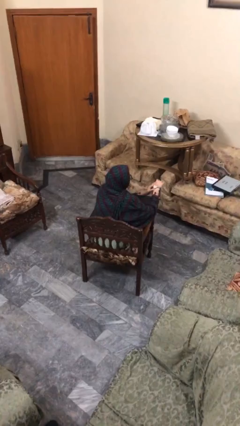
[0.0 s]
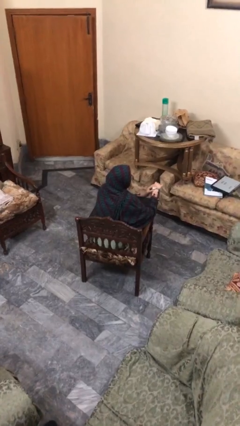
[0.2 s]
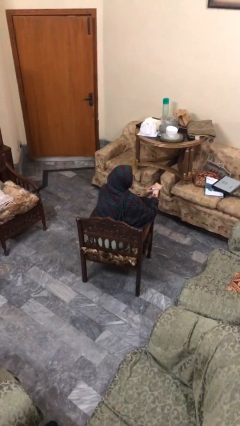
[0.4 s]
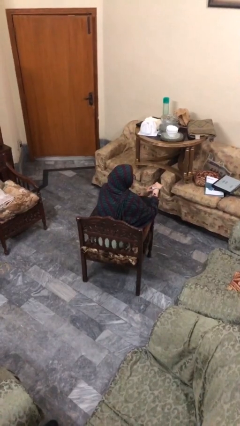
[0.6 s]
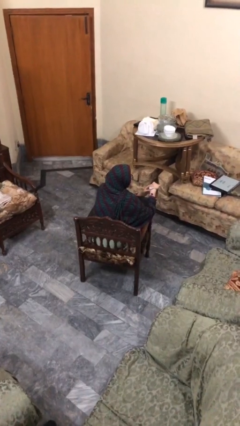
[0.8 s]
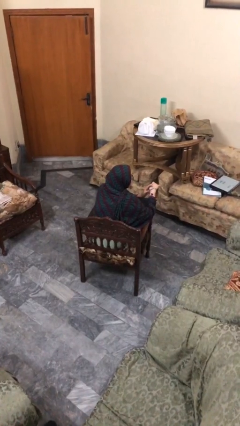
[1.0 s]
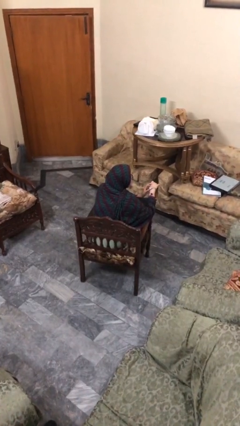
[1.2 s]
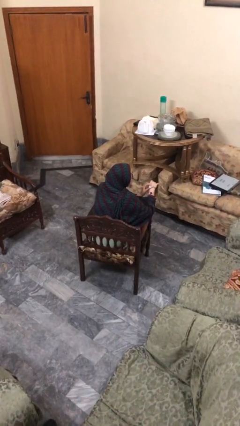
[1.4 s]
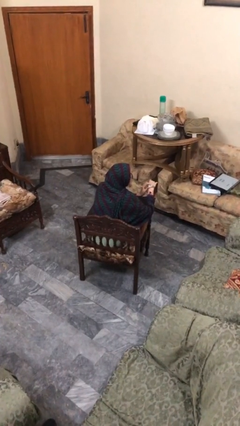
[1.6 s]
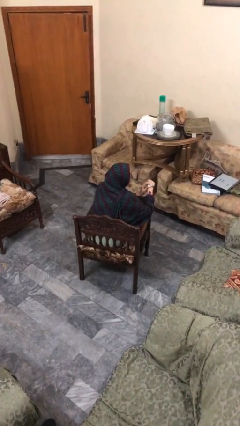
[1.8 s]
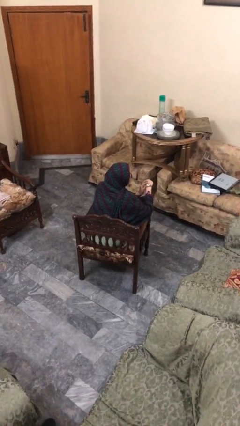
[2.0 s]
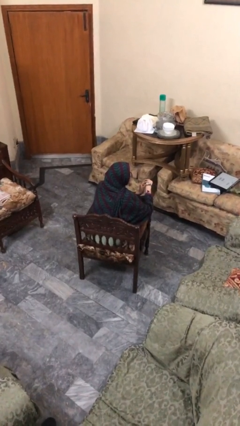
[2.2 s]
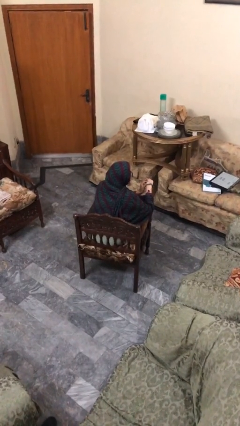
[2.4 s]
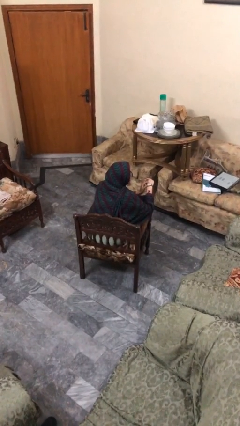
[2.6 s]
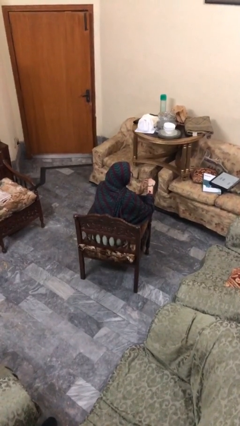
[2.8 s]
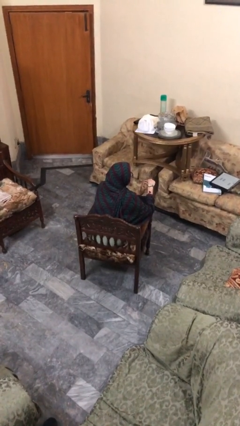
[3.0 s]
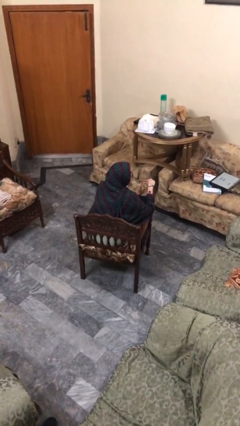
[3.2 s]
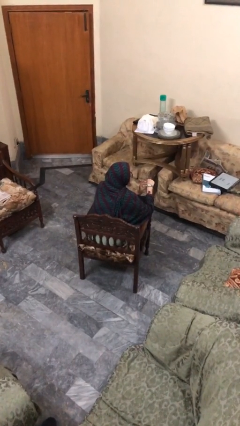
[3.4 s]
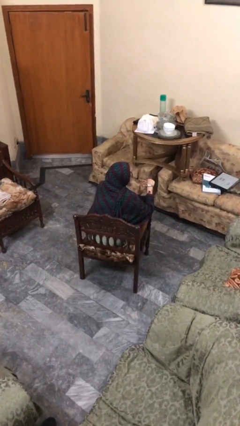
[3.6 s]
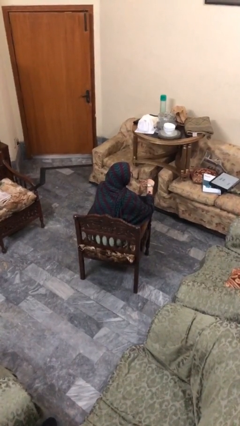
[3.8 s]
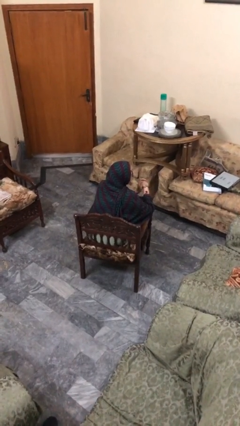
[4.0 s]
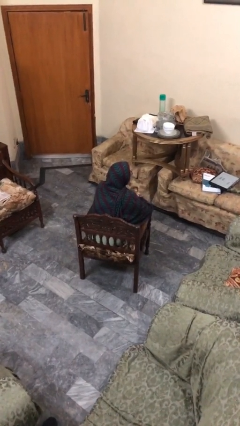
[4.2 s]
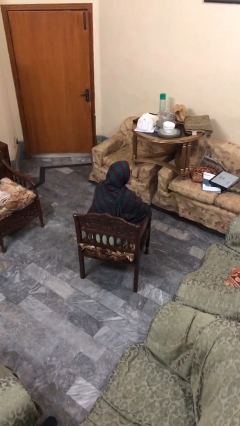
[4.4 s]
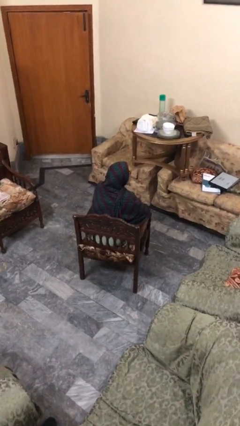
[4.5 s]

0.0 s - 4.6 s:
person looks at wristwatch

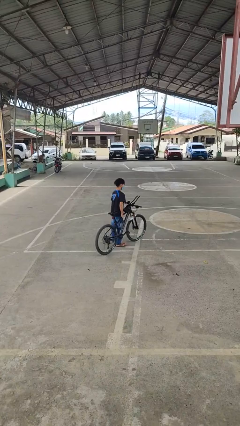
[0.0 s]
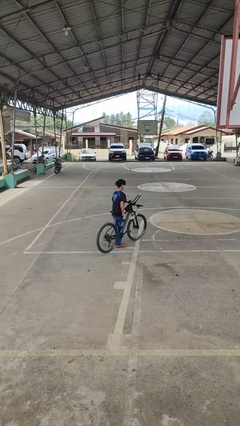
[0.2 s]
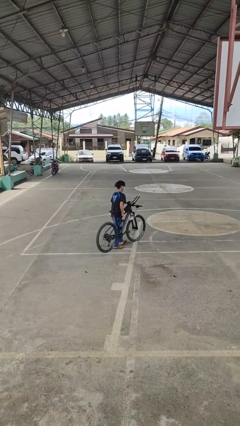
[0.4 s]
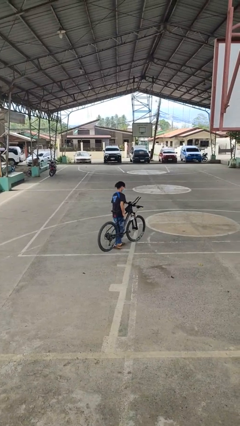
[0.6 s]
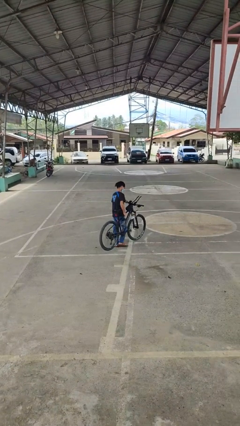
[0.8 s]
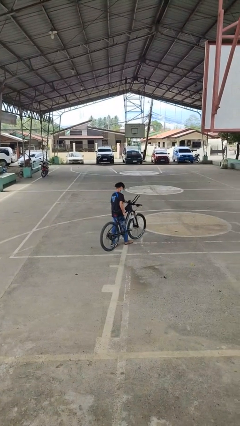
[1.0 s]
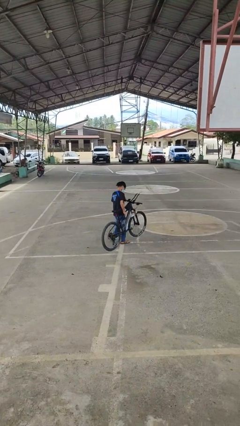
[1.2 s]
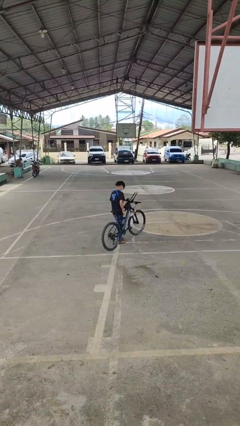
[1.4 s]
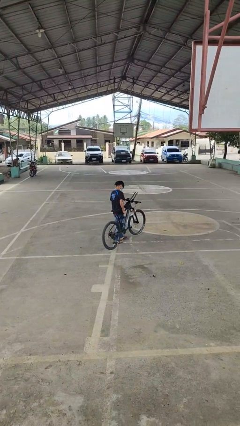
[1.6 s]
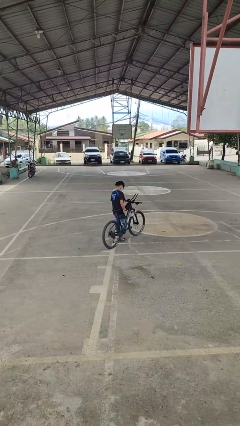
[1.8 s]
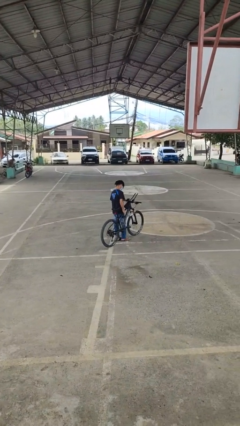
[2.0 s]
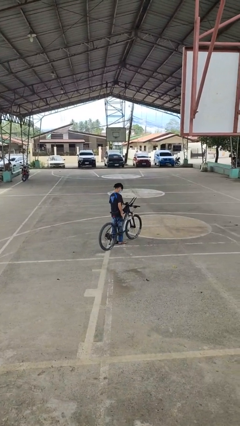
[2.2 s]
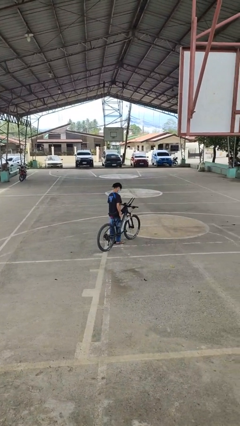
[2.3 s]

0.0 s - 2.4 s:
person carries bicycle

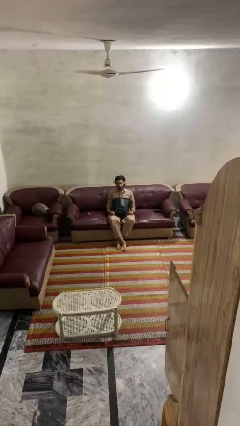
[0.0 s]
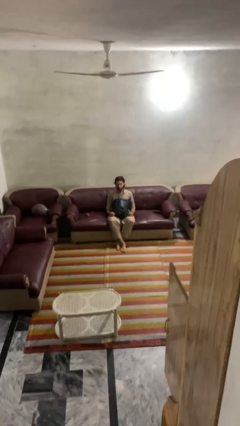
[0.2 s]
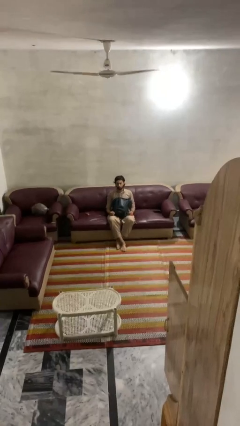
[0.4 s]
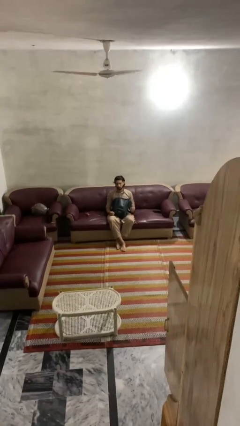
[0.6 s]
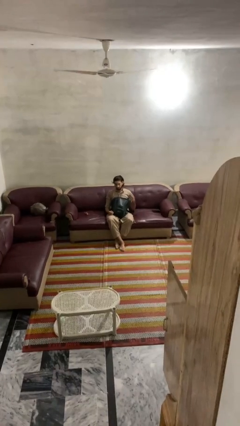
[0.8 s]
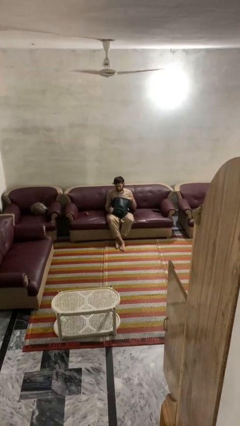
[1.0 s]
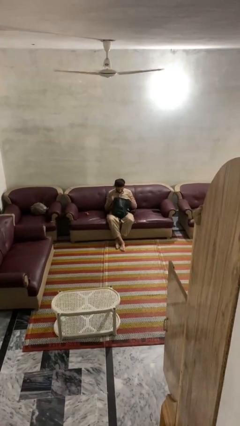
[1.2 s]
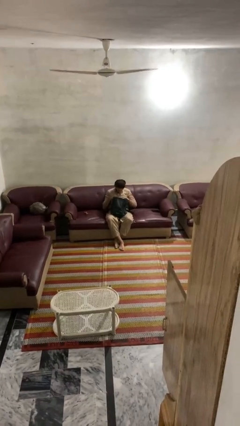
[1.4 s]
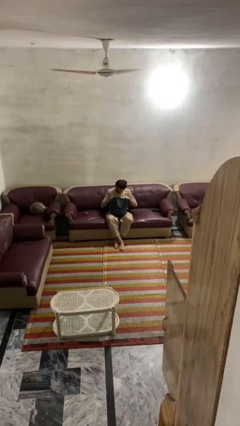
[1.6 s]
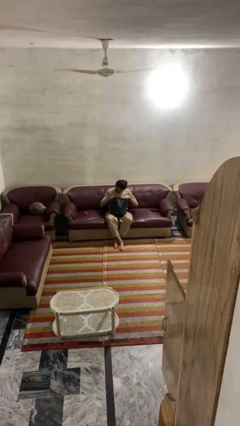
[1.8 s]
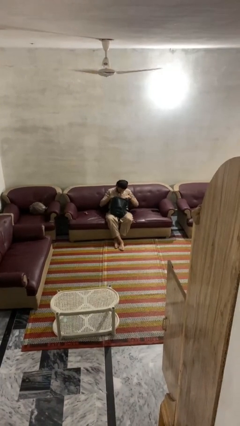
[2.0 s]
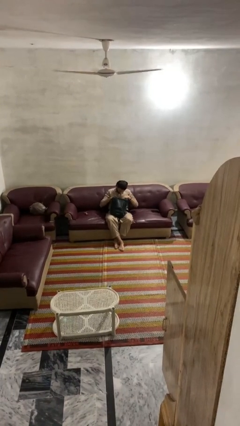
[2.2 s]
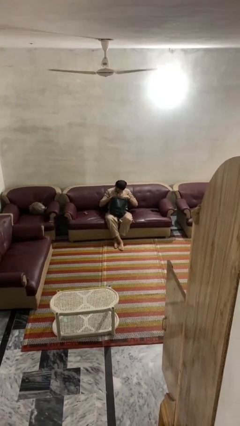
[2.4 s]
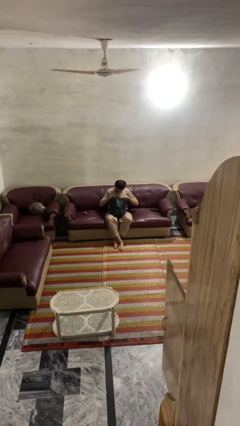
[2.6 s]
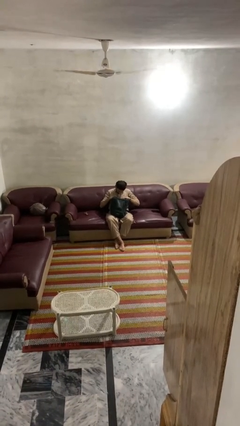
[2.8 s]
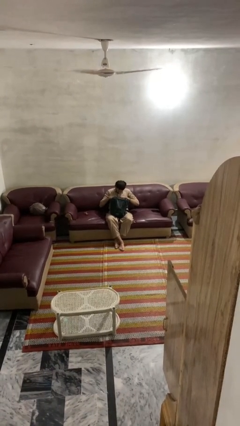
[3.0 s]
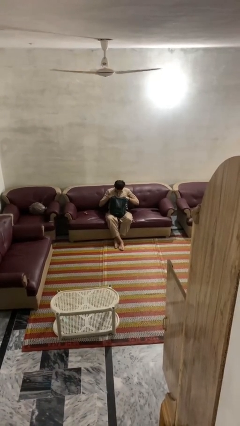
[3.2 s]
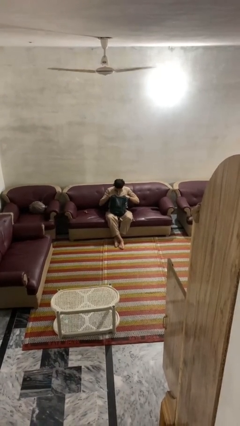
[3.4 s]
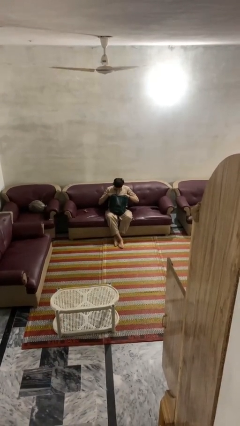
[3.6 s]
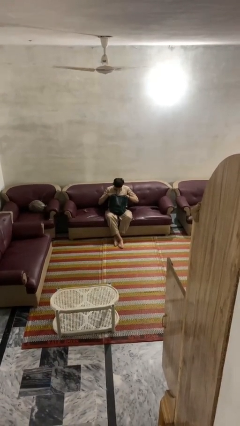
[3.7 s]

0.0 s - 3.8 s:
person searches in backpack

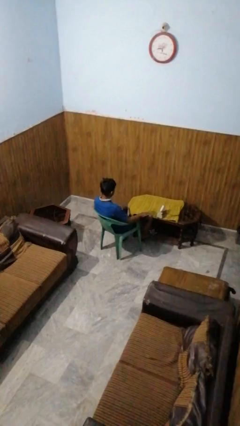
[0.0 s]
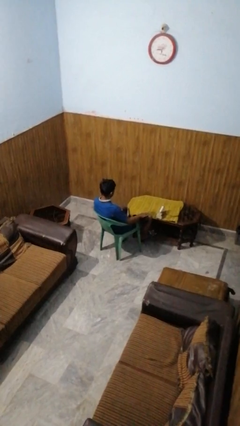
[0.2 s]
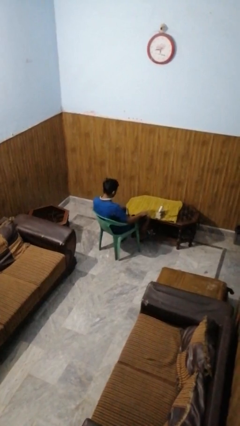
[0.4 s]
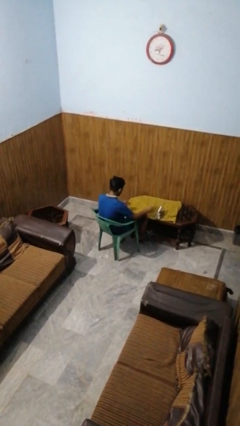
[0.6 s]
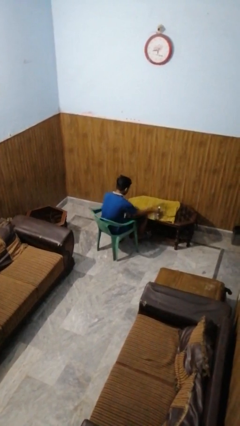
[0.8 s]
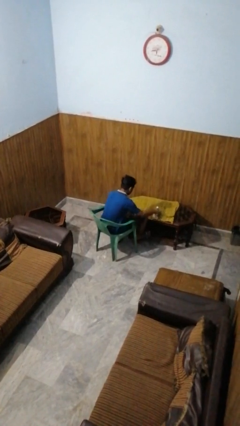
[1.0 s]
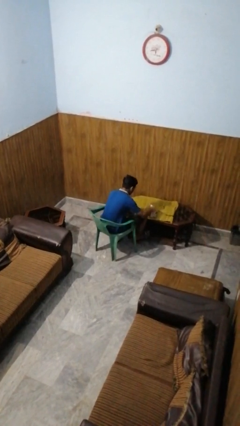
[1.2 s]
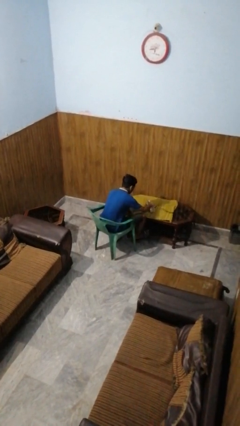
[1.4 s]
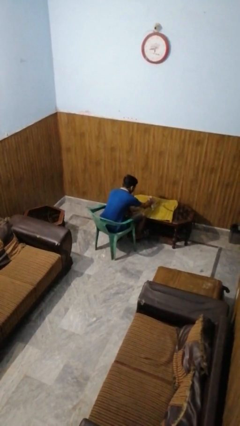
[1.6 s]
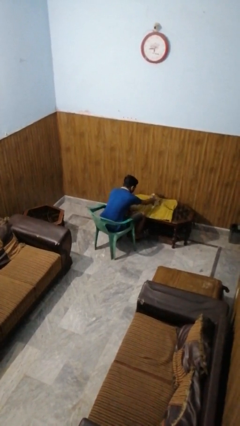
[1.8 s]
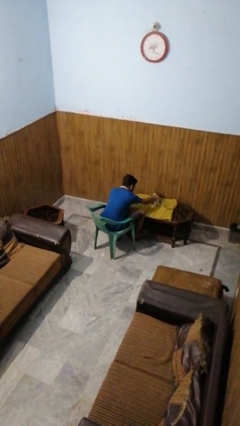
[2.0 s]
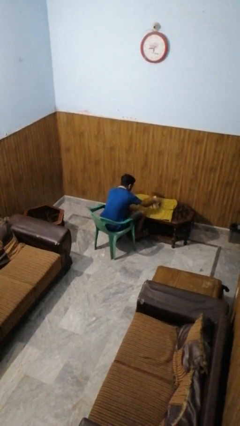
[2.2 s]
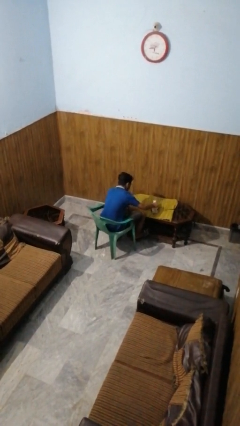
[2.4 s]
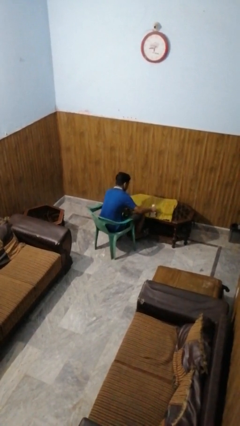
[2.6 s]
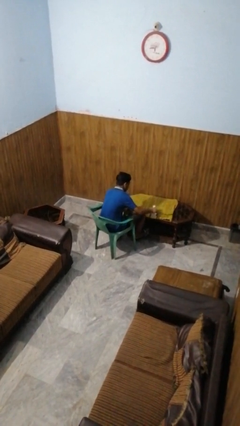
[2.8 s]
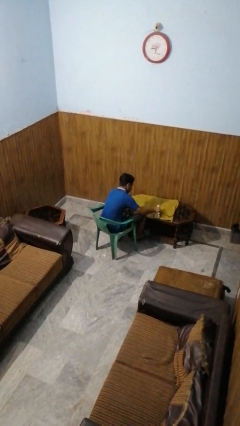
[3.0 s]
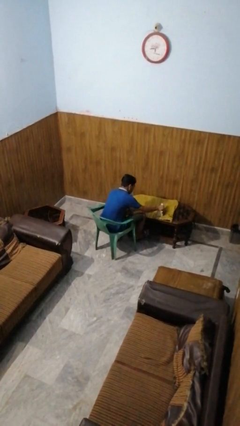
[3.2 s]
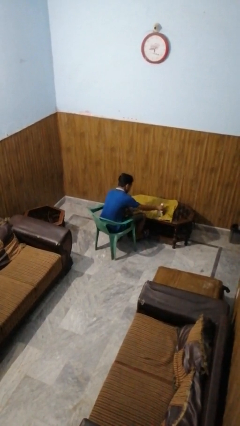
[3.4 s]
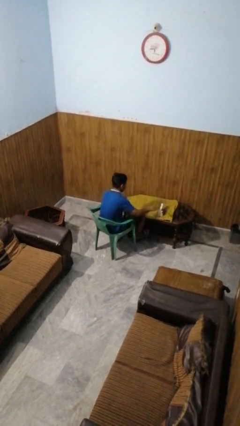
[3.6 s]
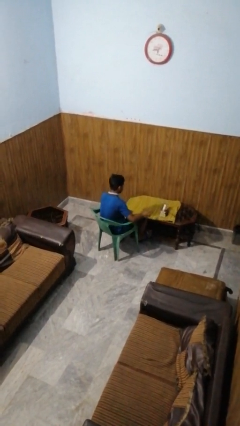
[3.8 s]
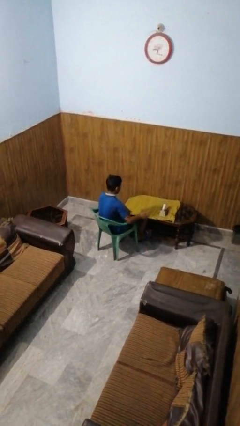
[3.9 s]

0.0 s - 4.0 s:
person irons clothes

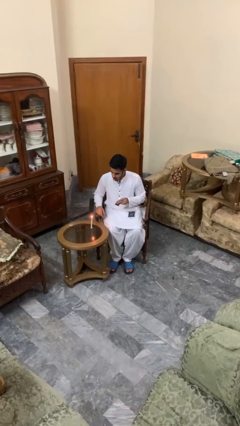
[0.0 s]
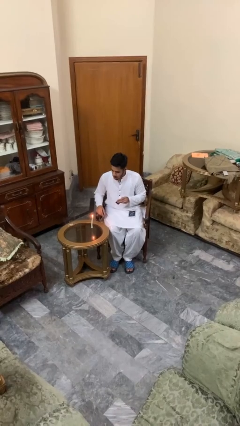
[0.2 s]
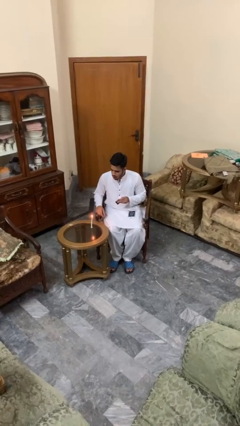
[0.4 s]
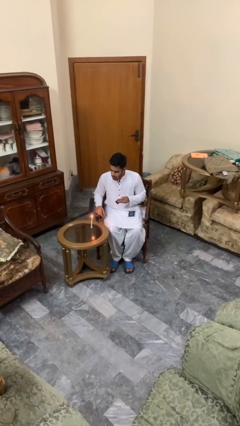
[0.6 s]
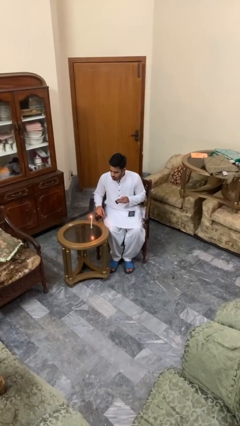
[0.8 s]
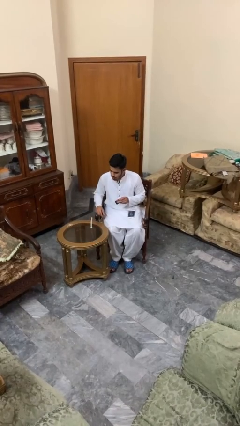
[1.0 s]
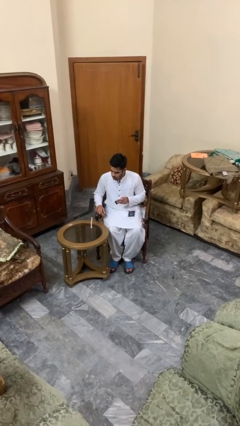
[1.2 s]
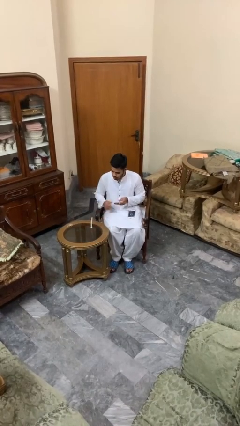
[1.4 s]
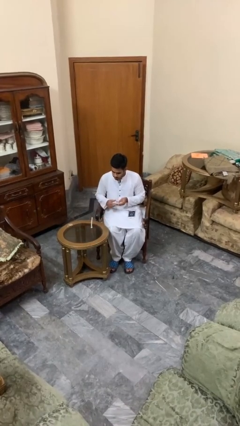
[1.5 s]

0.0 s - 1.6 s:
person extinguishes candle

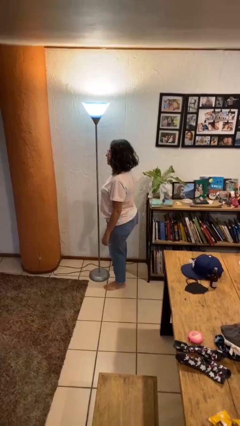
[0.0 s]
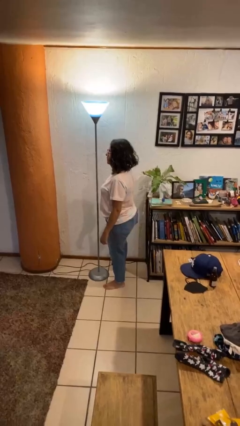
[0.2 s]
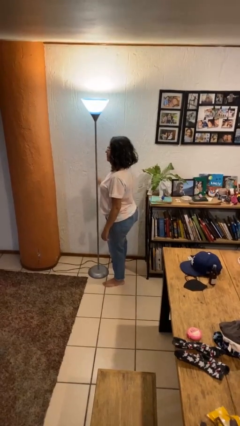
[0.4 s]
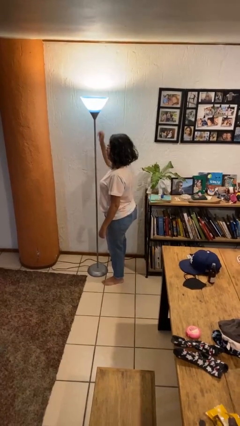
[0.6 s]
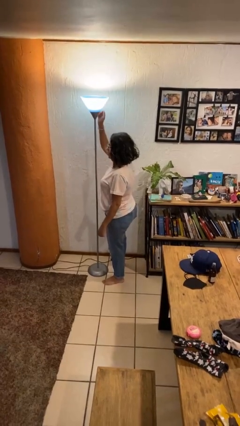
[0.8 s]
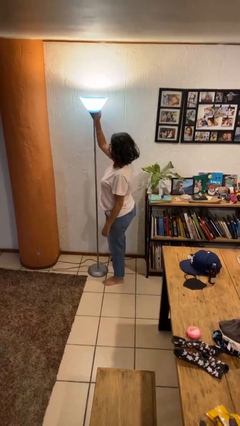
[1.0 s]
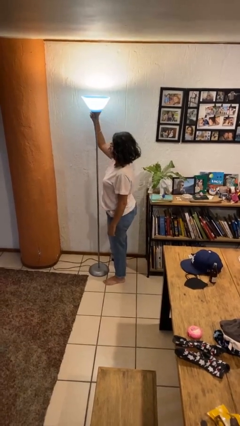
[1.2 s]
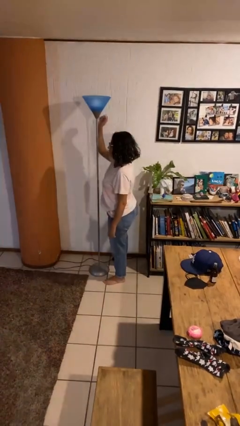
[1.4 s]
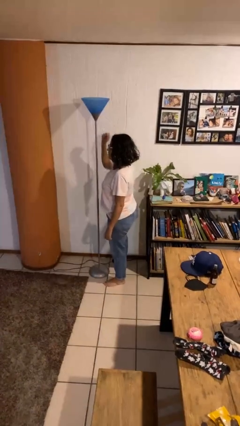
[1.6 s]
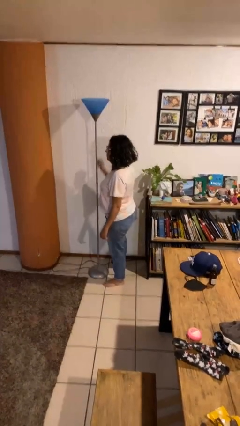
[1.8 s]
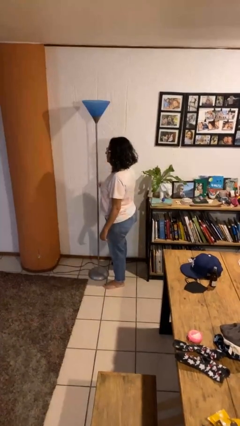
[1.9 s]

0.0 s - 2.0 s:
person turns off lamp
